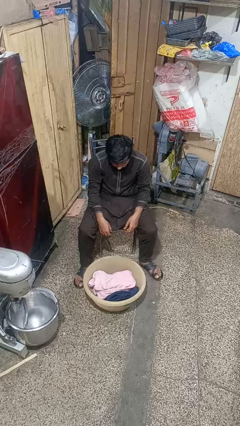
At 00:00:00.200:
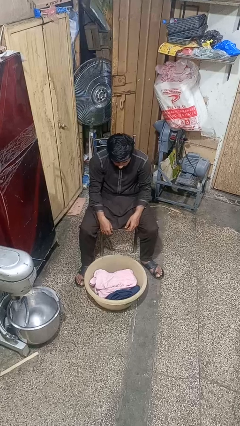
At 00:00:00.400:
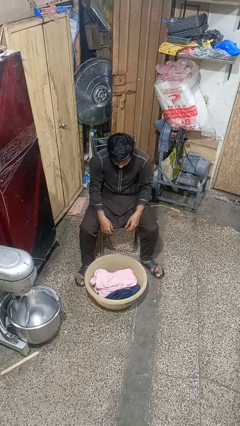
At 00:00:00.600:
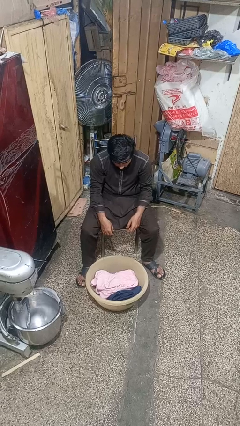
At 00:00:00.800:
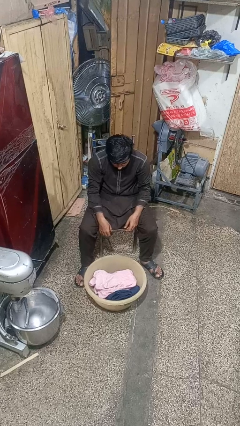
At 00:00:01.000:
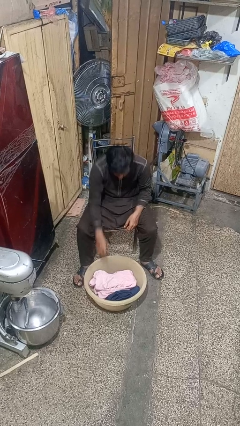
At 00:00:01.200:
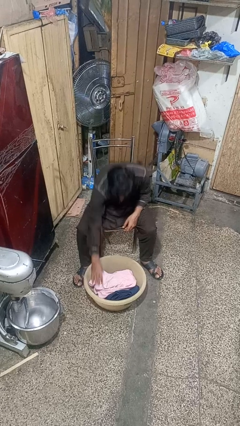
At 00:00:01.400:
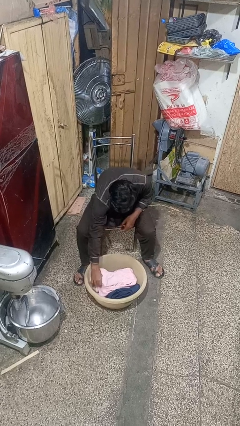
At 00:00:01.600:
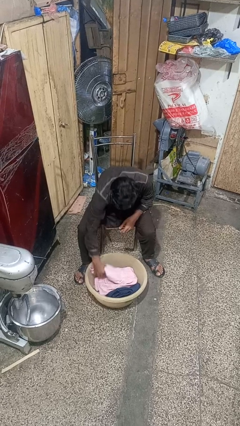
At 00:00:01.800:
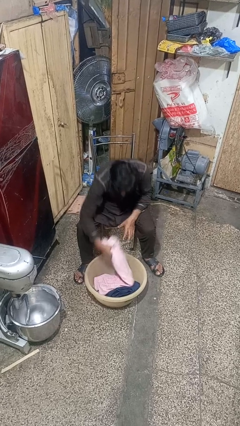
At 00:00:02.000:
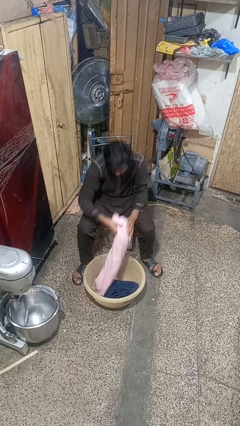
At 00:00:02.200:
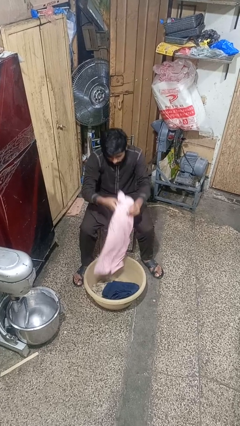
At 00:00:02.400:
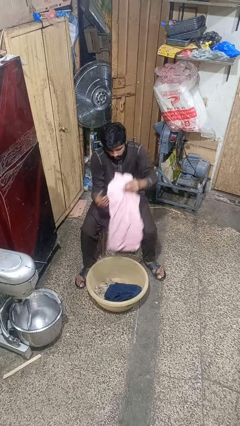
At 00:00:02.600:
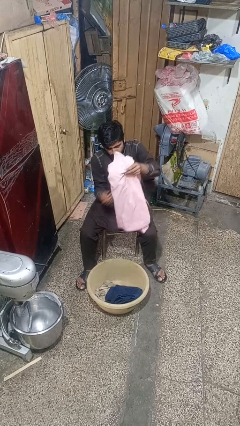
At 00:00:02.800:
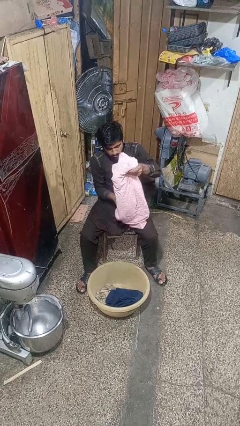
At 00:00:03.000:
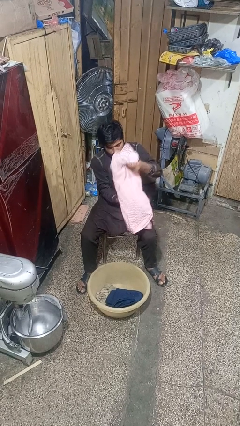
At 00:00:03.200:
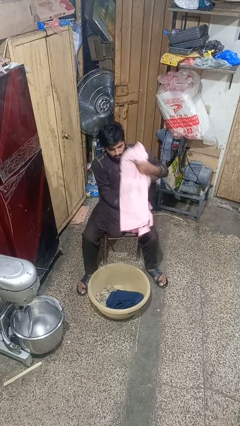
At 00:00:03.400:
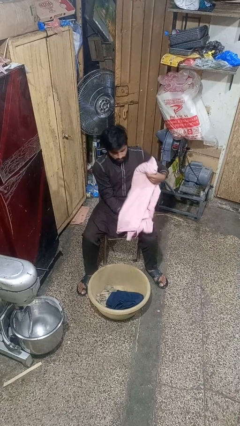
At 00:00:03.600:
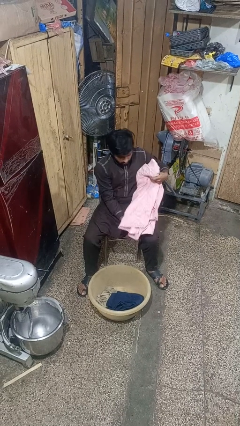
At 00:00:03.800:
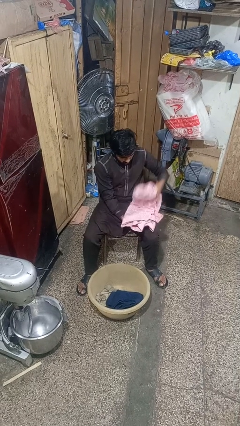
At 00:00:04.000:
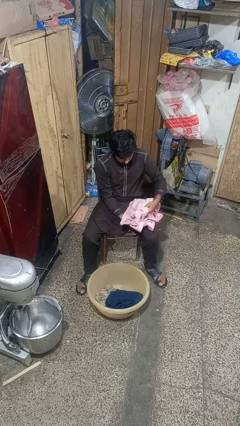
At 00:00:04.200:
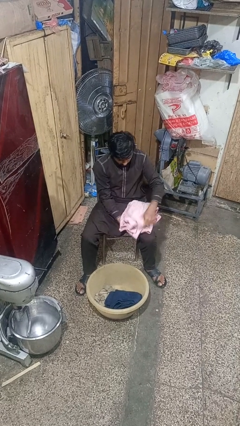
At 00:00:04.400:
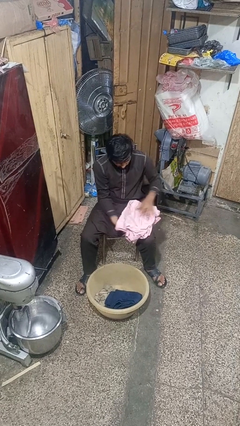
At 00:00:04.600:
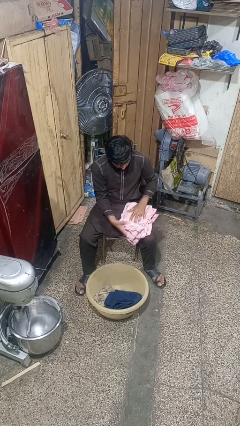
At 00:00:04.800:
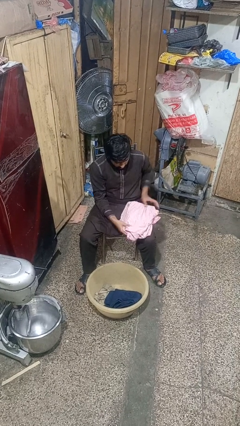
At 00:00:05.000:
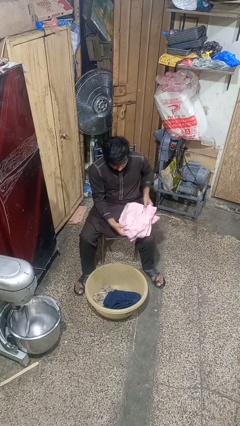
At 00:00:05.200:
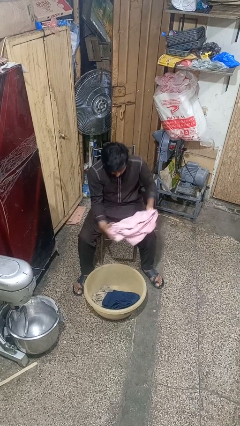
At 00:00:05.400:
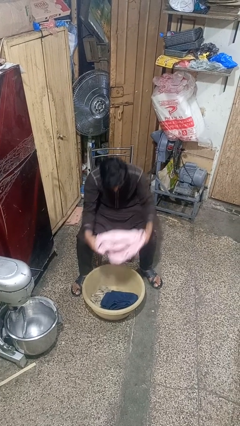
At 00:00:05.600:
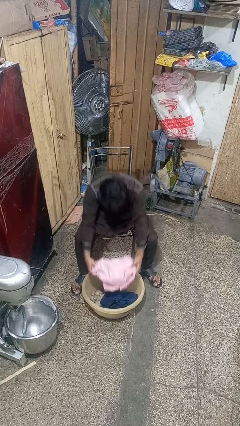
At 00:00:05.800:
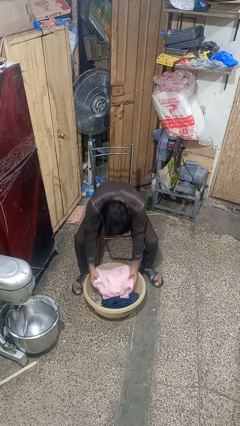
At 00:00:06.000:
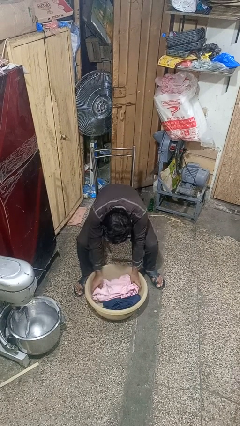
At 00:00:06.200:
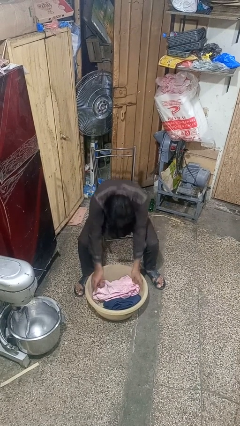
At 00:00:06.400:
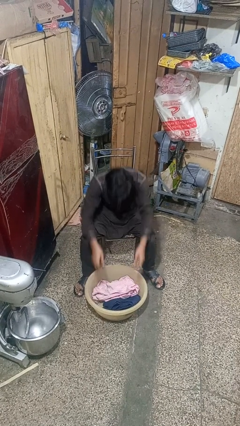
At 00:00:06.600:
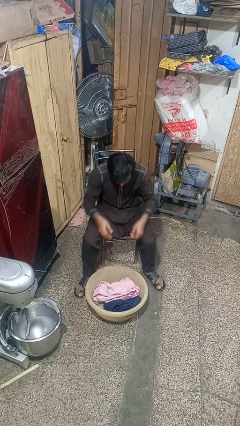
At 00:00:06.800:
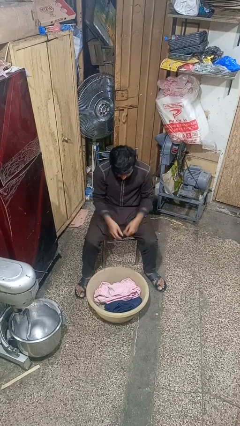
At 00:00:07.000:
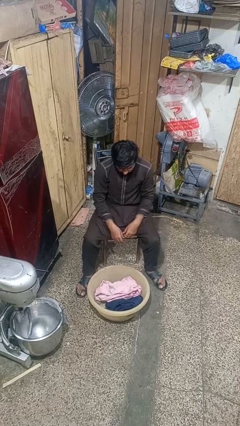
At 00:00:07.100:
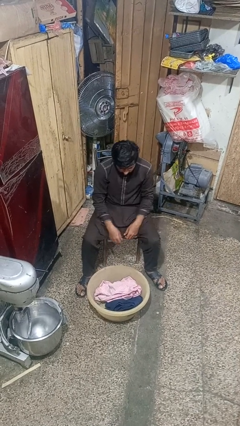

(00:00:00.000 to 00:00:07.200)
person folds shirt

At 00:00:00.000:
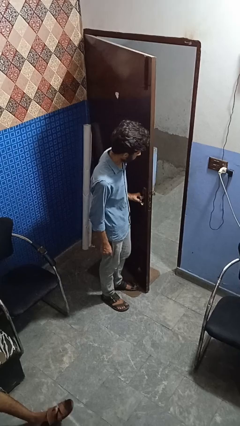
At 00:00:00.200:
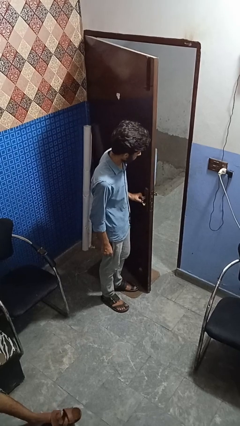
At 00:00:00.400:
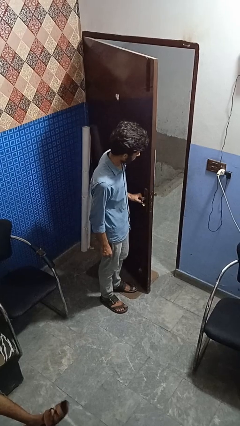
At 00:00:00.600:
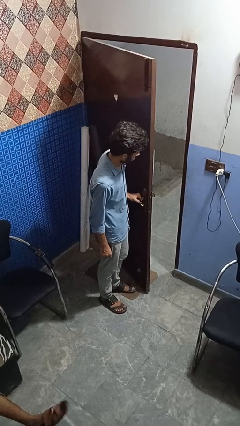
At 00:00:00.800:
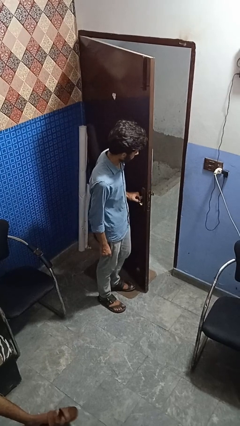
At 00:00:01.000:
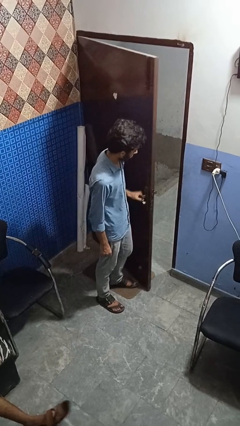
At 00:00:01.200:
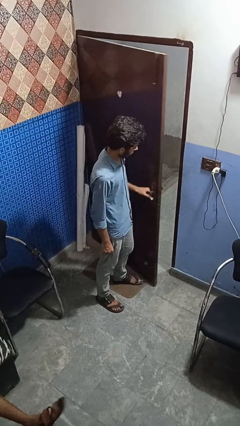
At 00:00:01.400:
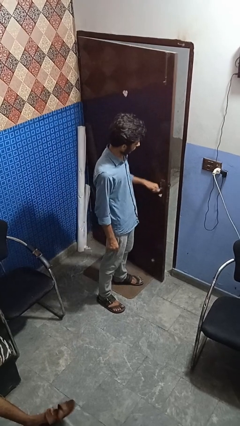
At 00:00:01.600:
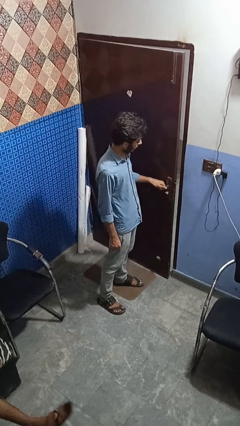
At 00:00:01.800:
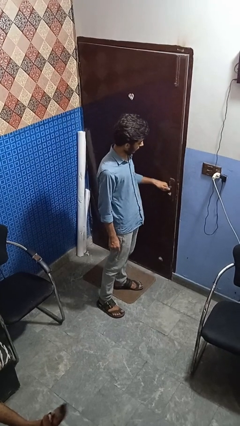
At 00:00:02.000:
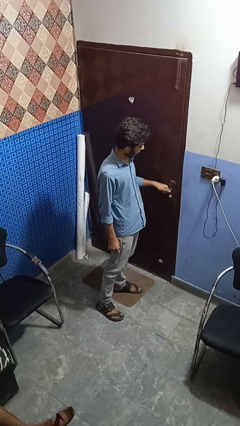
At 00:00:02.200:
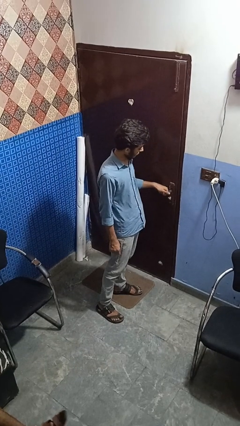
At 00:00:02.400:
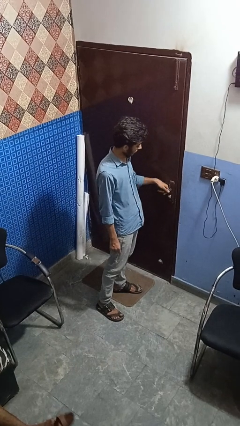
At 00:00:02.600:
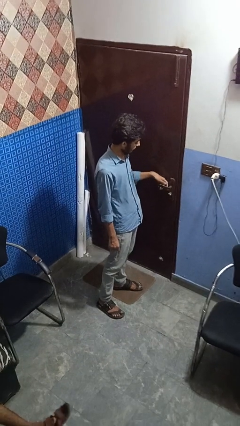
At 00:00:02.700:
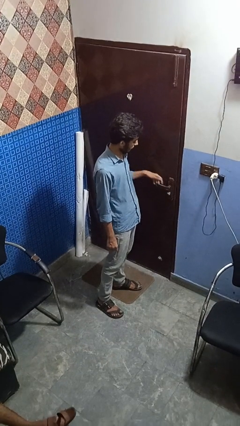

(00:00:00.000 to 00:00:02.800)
person closes facility door

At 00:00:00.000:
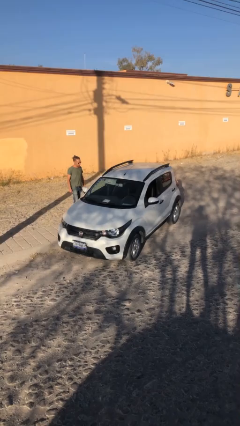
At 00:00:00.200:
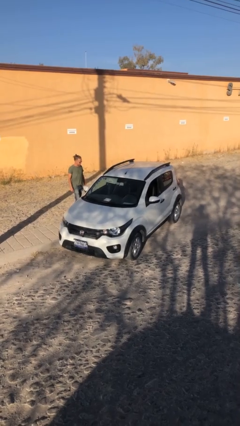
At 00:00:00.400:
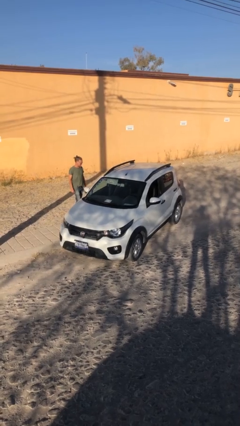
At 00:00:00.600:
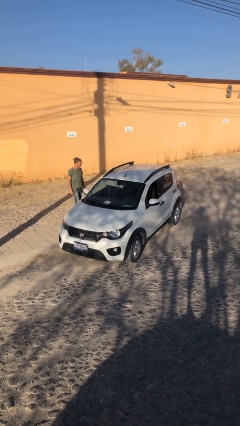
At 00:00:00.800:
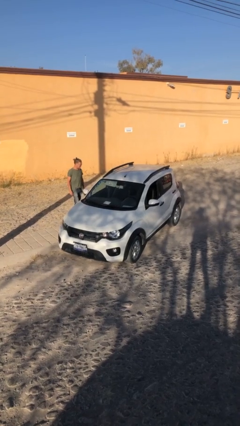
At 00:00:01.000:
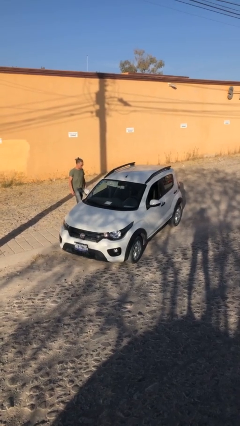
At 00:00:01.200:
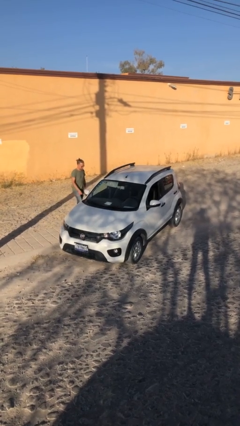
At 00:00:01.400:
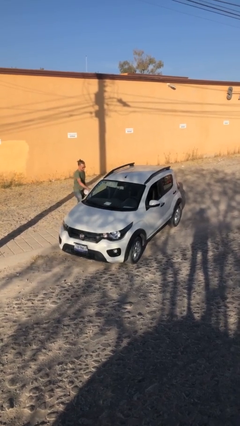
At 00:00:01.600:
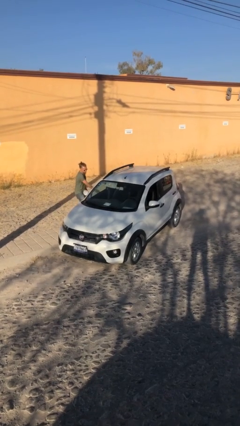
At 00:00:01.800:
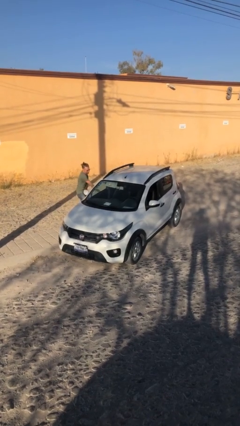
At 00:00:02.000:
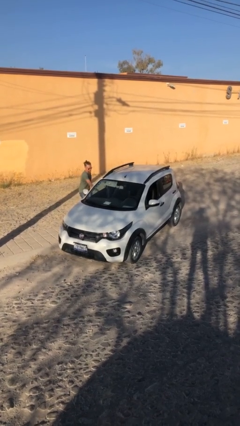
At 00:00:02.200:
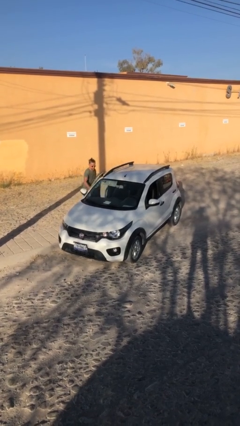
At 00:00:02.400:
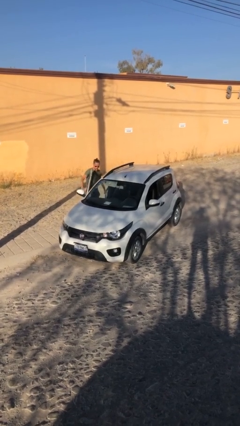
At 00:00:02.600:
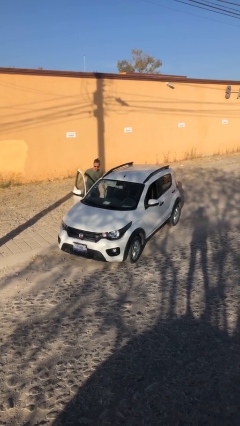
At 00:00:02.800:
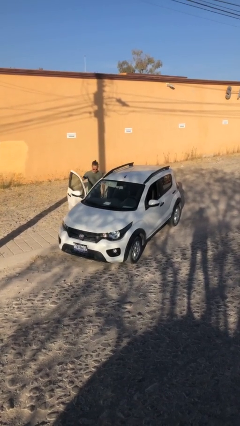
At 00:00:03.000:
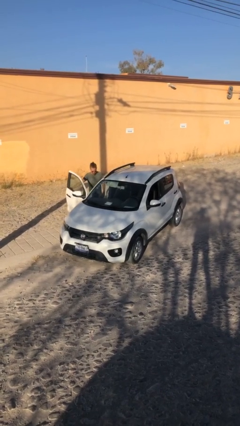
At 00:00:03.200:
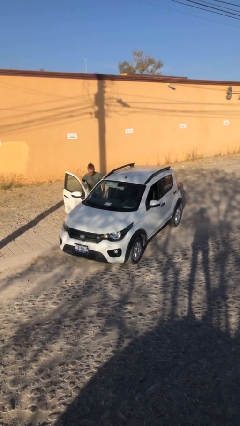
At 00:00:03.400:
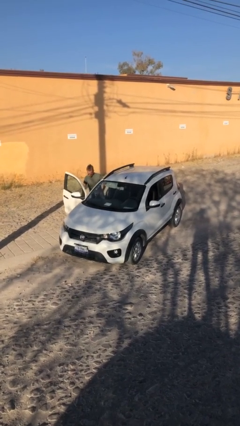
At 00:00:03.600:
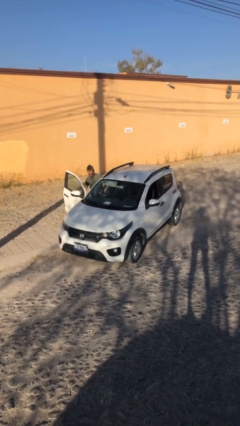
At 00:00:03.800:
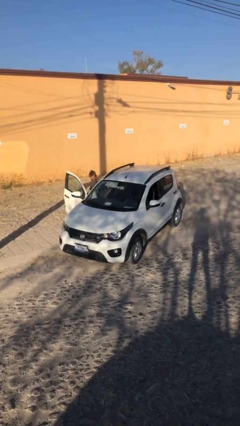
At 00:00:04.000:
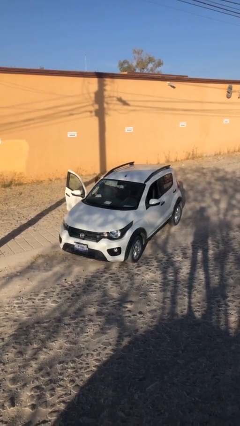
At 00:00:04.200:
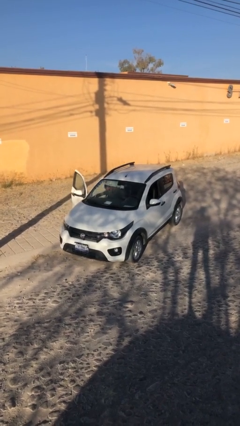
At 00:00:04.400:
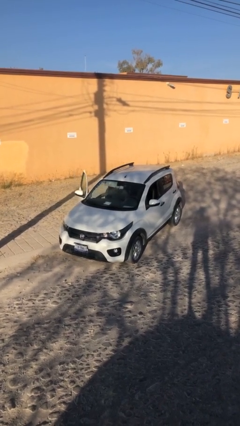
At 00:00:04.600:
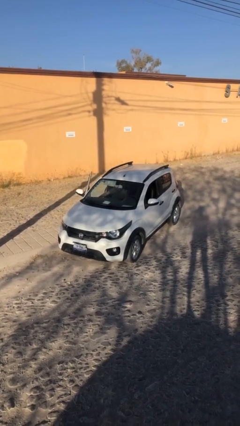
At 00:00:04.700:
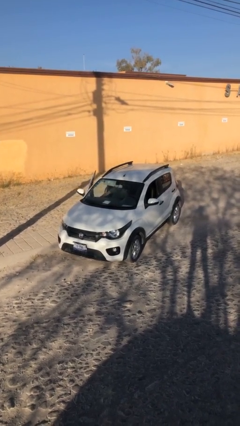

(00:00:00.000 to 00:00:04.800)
car picks up person

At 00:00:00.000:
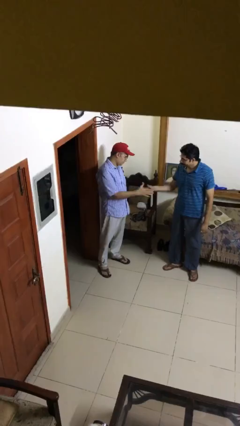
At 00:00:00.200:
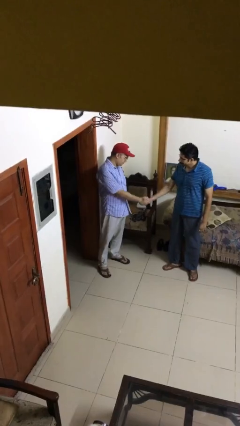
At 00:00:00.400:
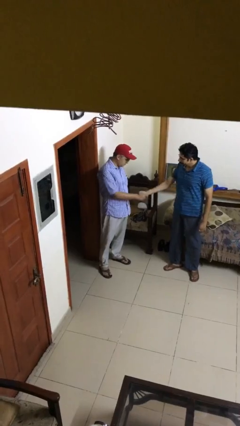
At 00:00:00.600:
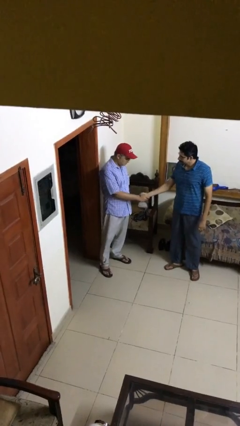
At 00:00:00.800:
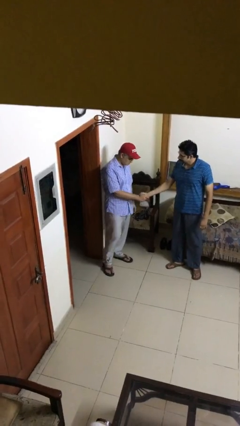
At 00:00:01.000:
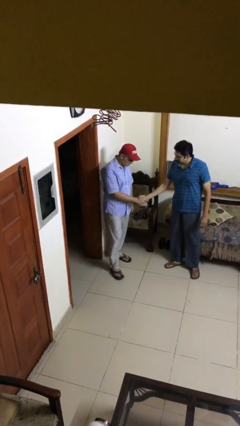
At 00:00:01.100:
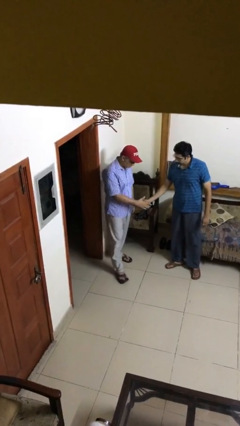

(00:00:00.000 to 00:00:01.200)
person shakes hand

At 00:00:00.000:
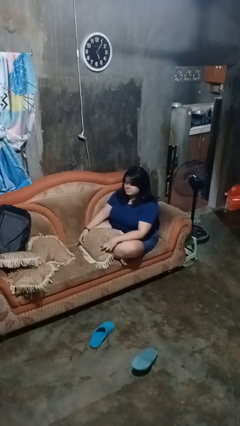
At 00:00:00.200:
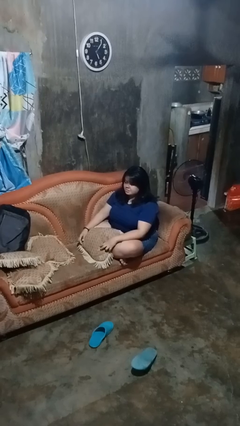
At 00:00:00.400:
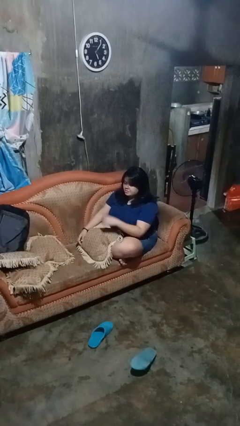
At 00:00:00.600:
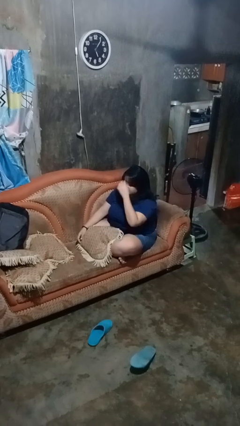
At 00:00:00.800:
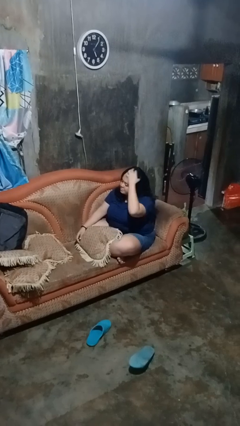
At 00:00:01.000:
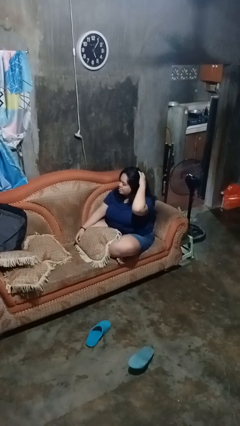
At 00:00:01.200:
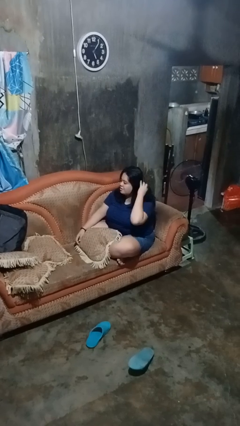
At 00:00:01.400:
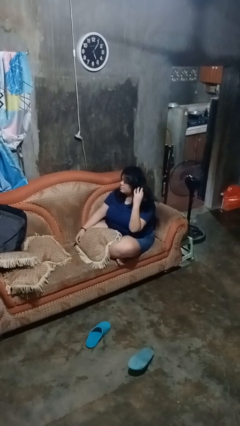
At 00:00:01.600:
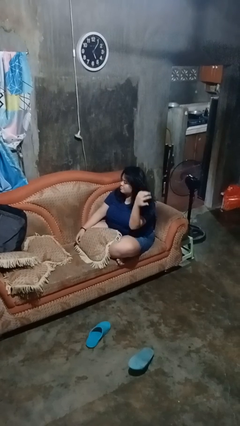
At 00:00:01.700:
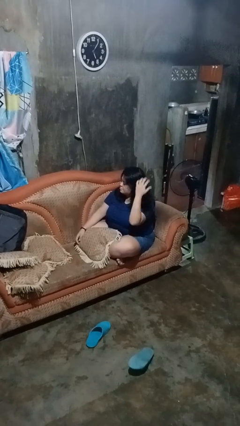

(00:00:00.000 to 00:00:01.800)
person strokes hair
